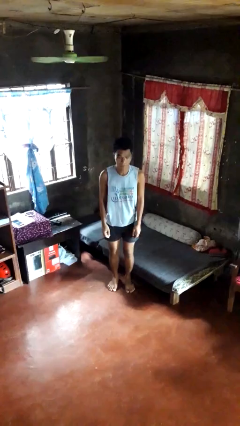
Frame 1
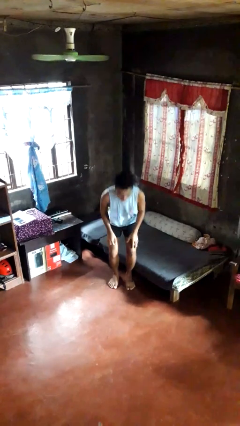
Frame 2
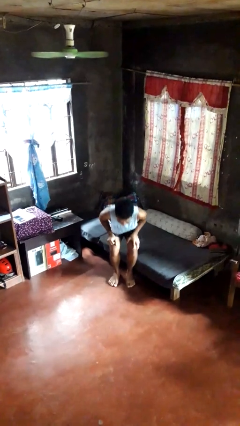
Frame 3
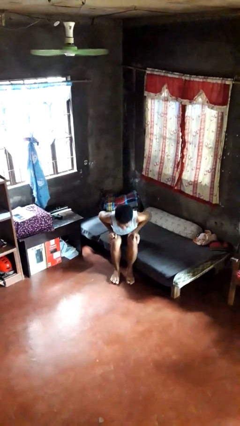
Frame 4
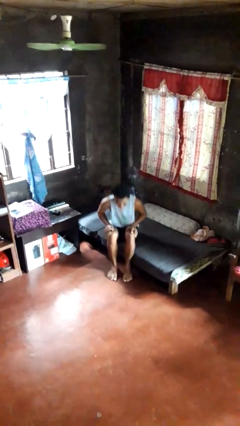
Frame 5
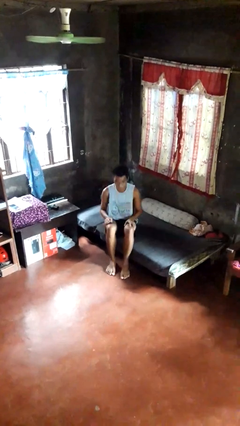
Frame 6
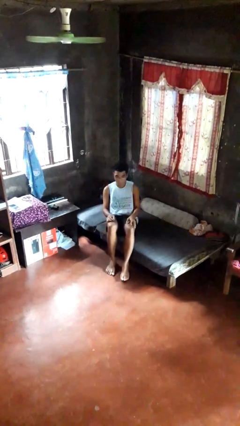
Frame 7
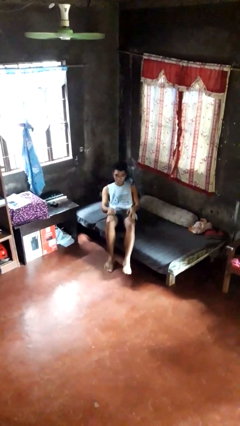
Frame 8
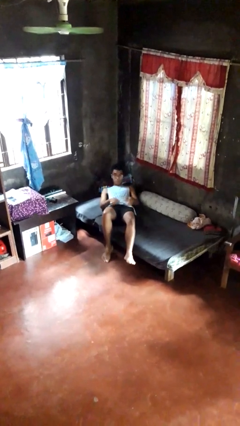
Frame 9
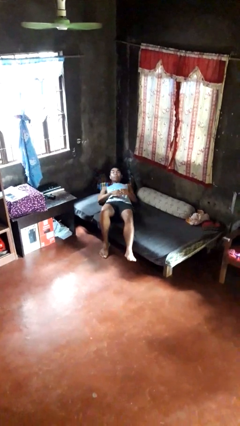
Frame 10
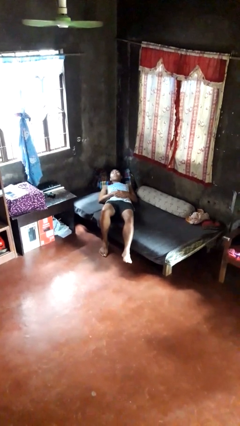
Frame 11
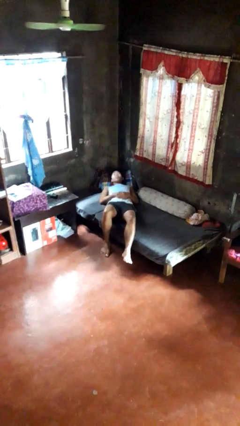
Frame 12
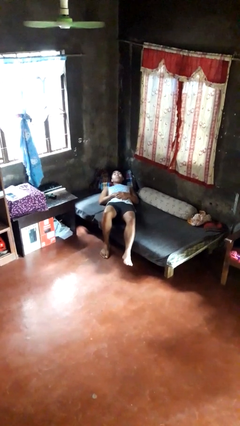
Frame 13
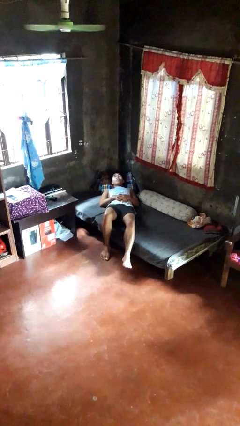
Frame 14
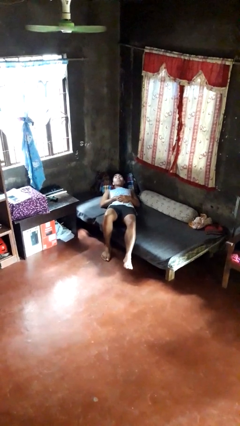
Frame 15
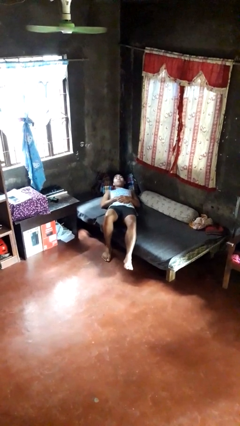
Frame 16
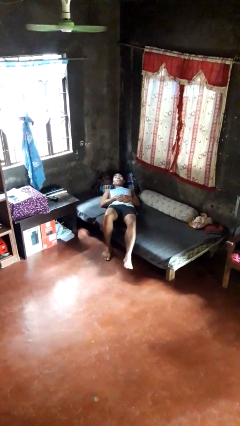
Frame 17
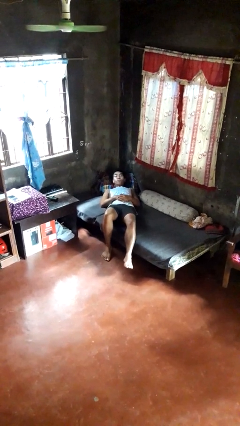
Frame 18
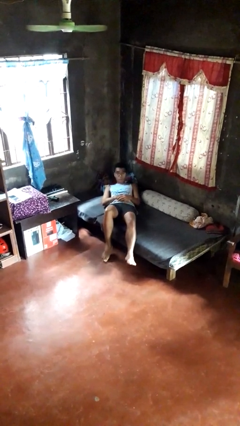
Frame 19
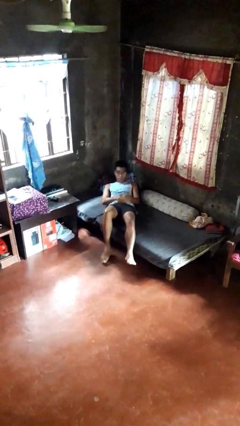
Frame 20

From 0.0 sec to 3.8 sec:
person lies down on bed

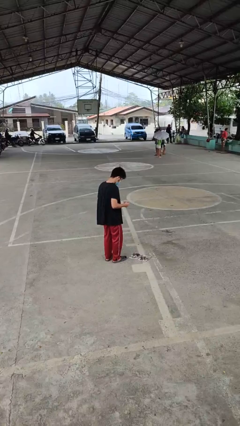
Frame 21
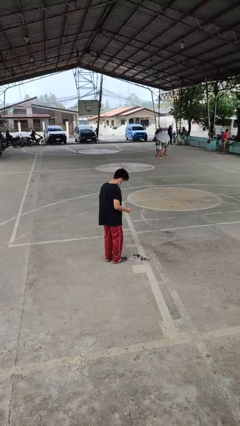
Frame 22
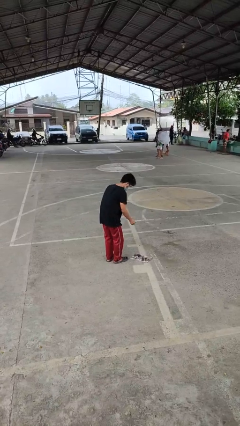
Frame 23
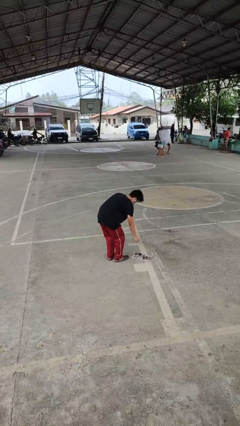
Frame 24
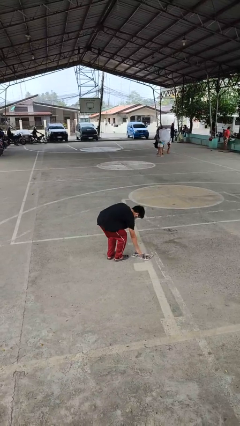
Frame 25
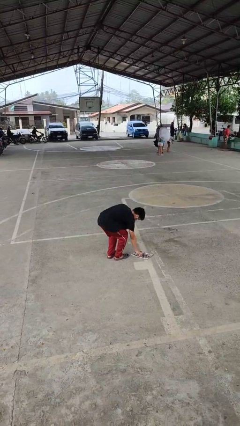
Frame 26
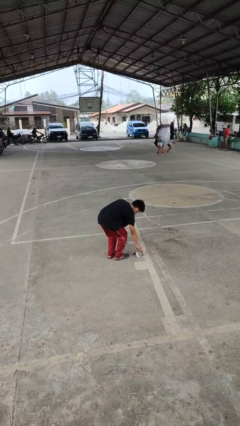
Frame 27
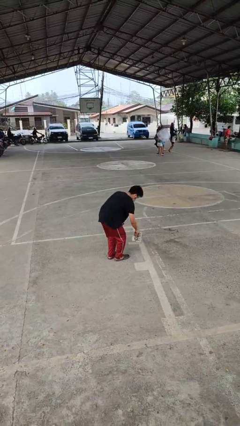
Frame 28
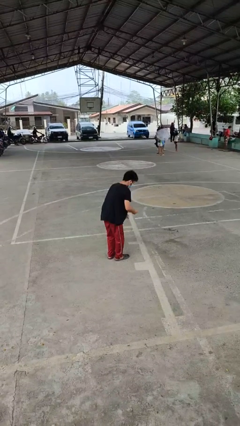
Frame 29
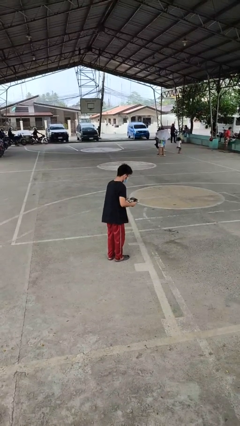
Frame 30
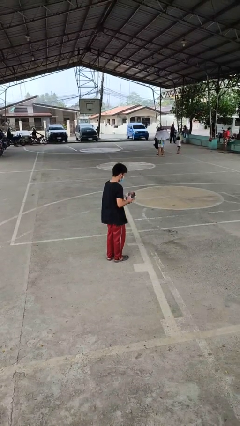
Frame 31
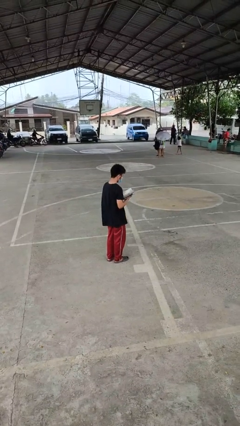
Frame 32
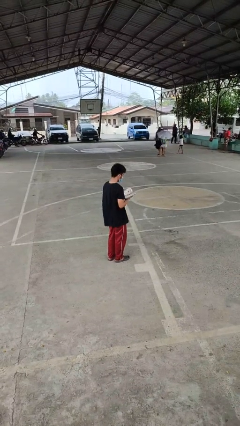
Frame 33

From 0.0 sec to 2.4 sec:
person picks up object from floor

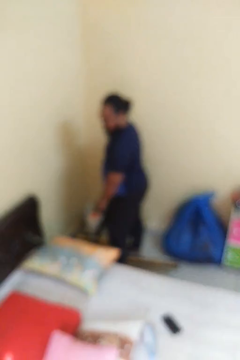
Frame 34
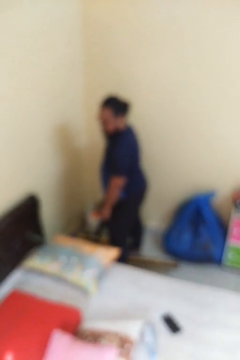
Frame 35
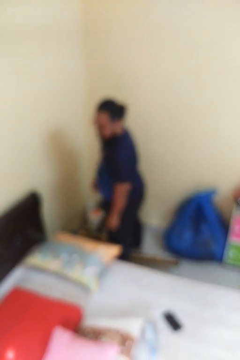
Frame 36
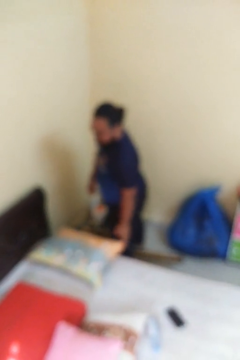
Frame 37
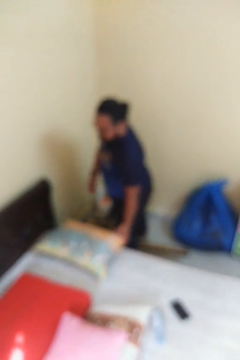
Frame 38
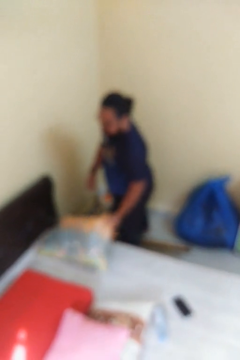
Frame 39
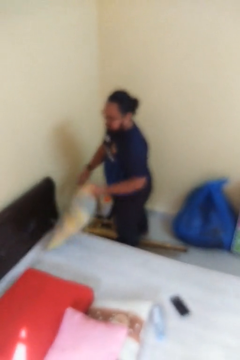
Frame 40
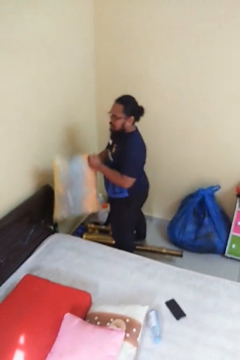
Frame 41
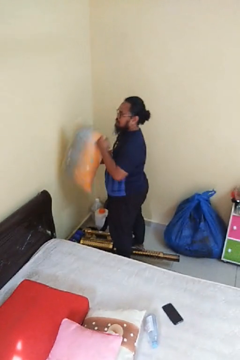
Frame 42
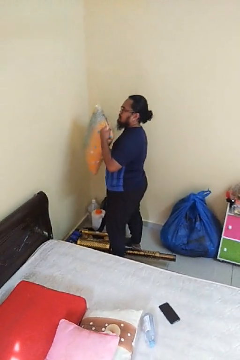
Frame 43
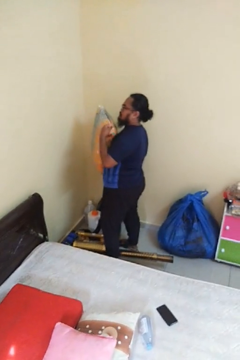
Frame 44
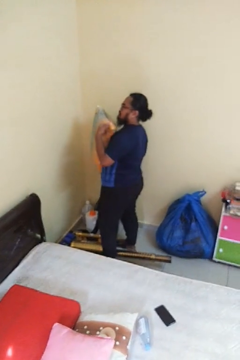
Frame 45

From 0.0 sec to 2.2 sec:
person picks up object from bed

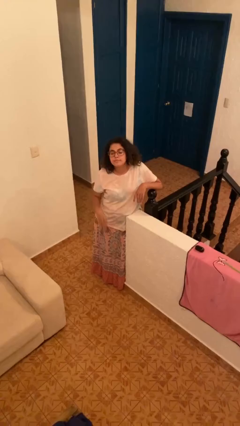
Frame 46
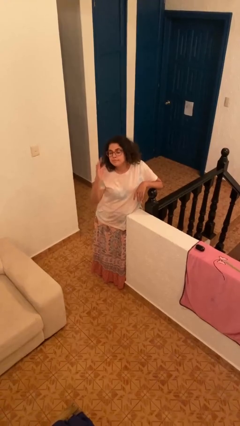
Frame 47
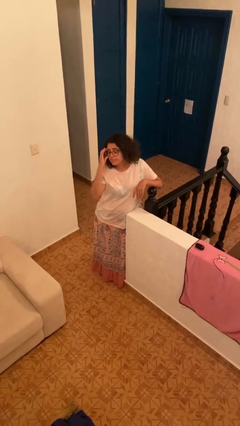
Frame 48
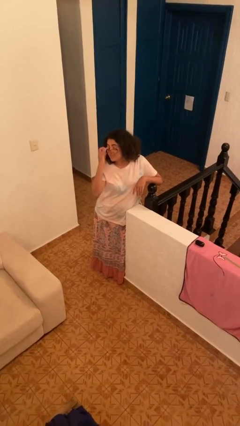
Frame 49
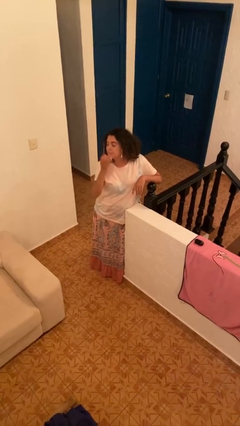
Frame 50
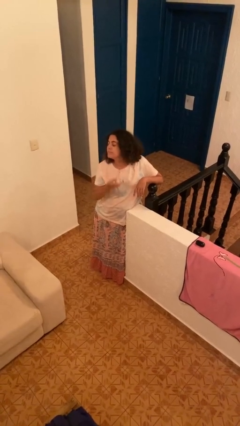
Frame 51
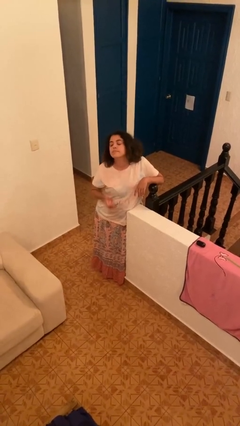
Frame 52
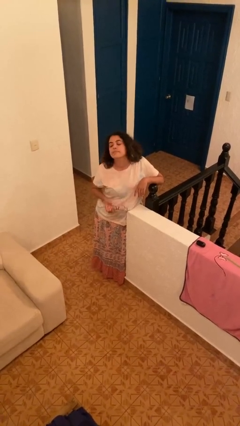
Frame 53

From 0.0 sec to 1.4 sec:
person takes off glasses

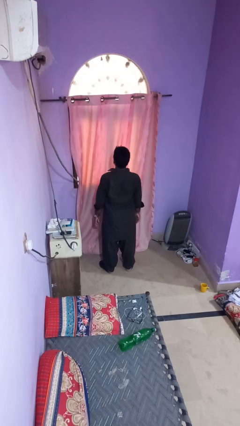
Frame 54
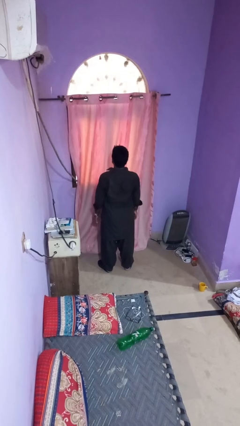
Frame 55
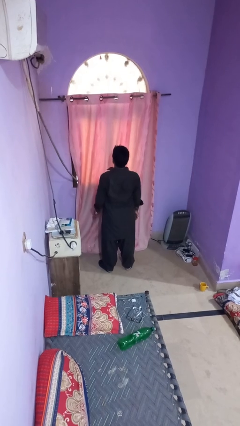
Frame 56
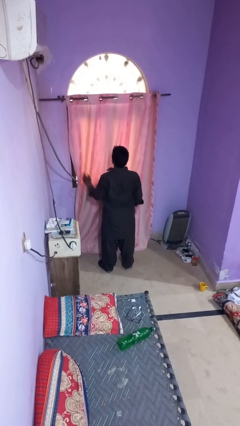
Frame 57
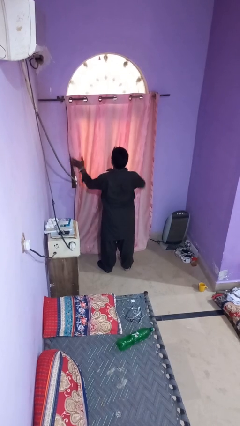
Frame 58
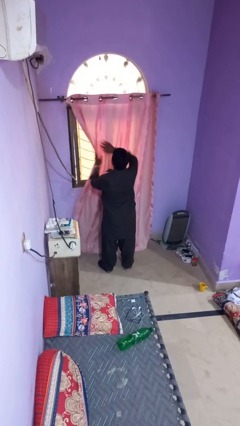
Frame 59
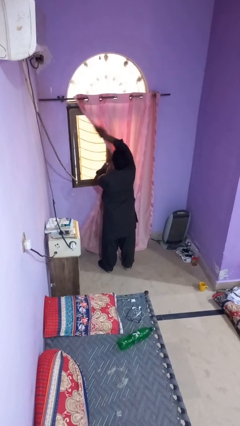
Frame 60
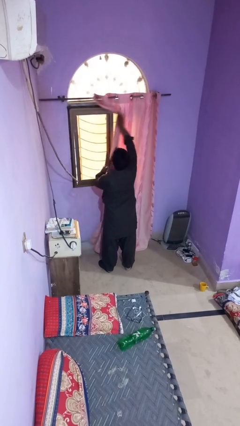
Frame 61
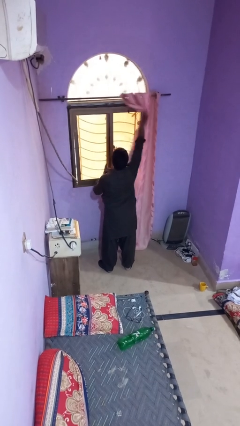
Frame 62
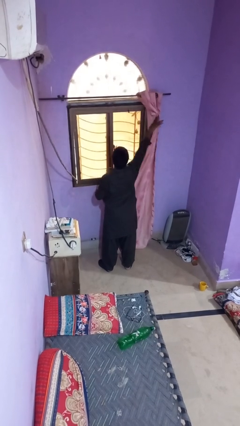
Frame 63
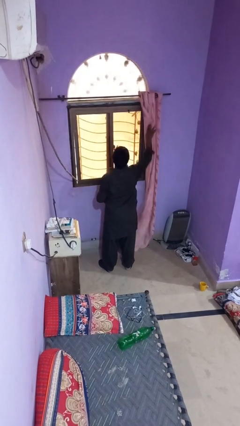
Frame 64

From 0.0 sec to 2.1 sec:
person opens curtains

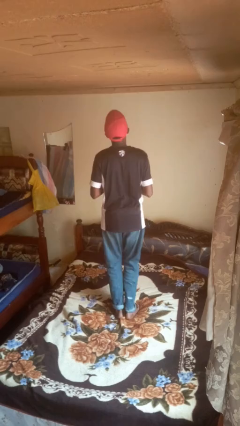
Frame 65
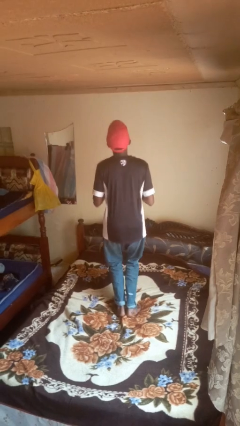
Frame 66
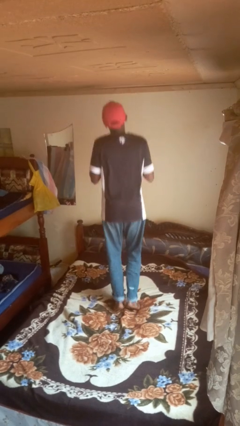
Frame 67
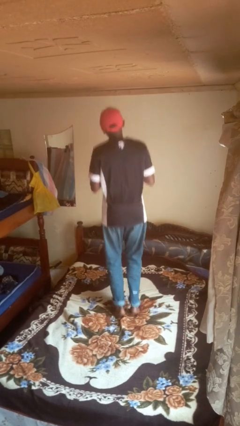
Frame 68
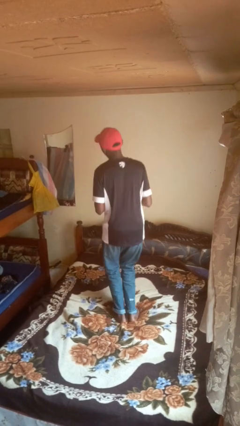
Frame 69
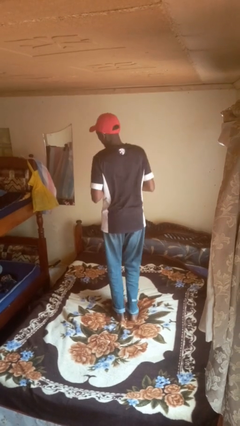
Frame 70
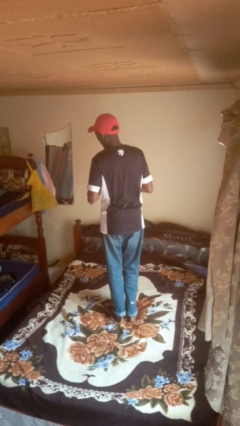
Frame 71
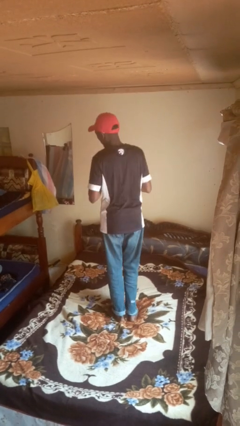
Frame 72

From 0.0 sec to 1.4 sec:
person jumps on bed

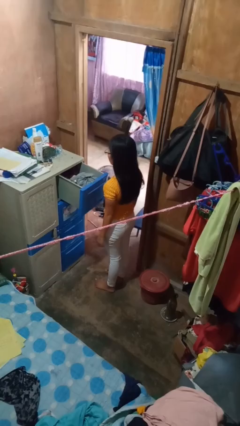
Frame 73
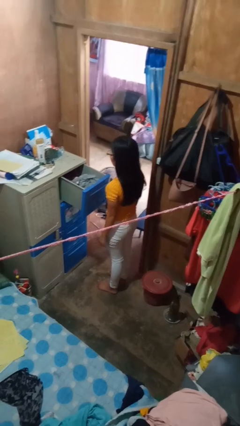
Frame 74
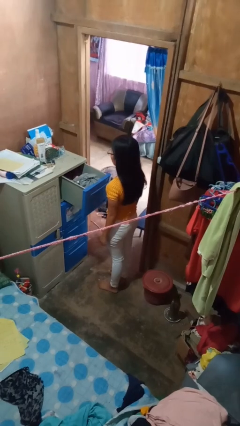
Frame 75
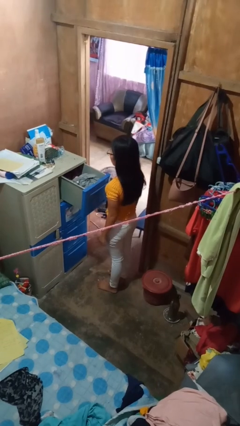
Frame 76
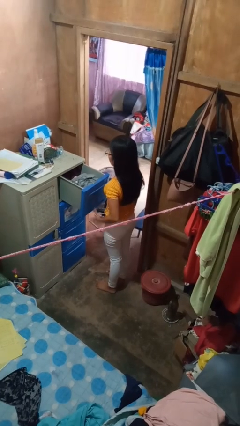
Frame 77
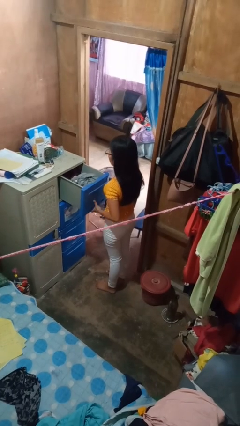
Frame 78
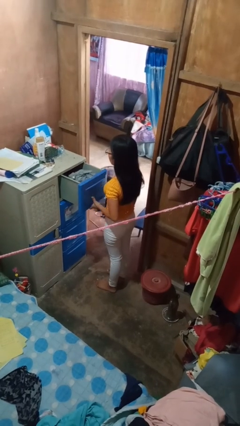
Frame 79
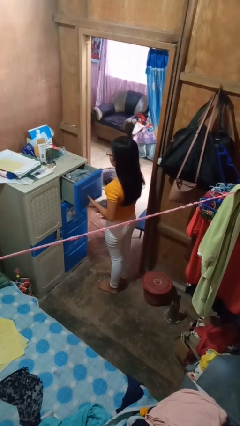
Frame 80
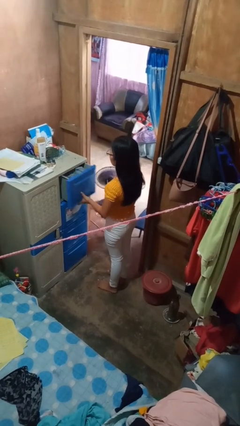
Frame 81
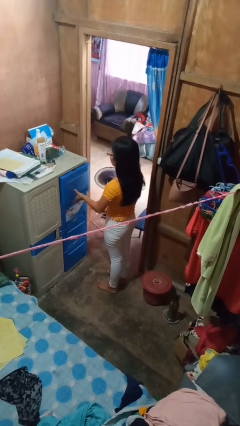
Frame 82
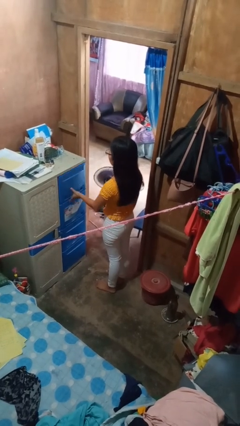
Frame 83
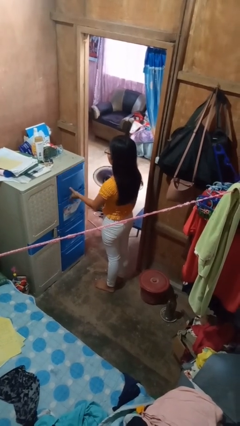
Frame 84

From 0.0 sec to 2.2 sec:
person closes dresser drawer

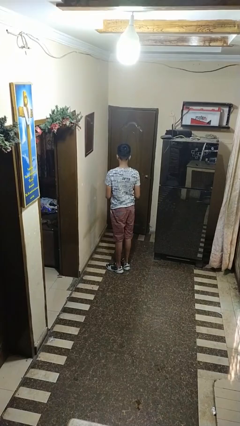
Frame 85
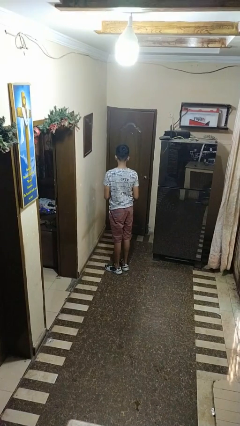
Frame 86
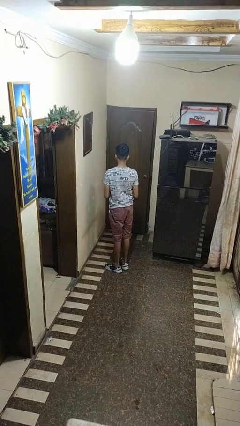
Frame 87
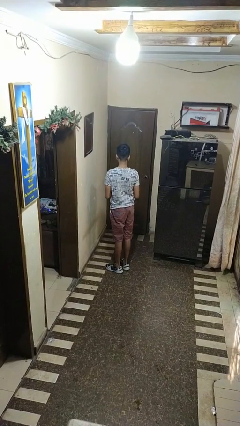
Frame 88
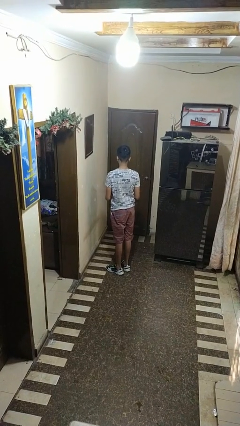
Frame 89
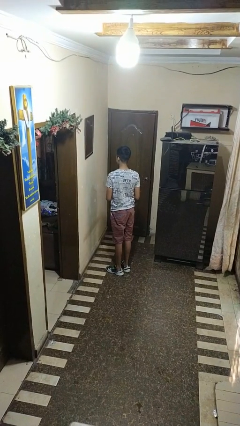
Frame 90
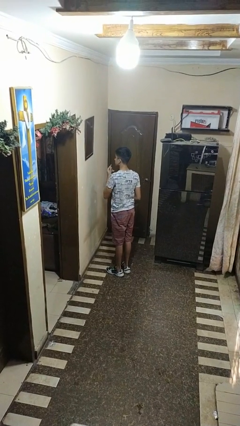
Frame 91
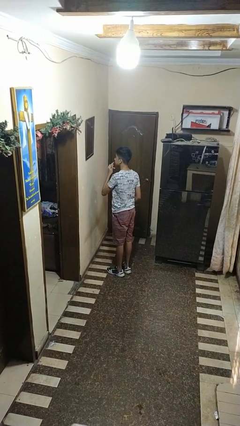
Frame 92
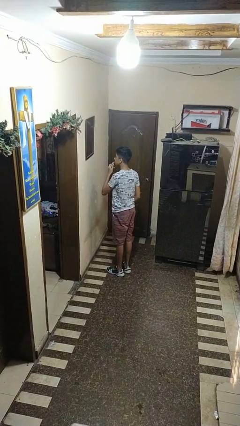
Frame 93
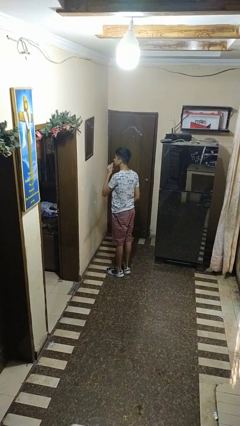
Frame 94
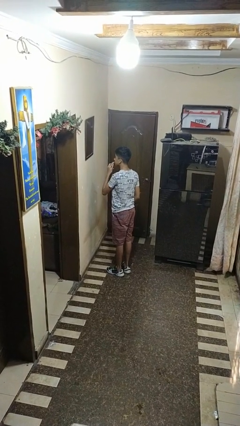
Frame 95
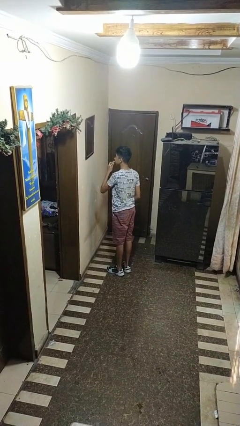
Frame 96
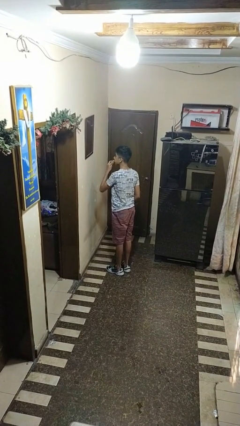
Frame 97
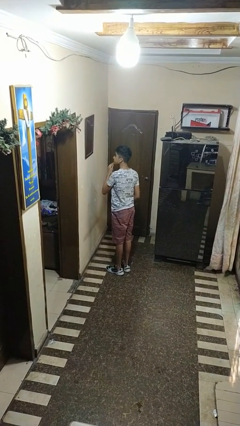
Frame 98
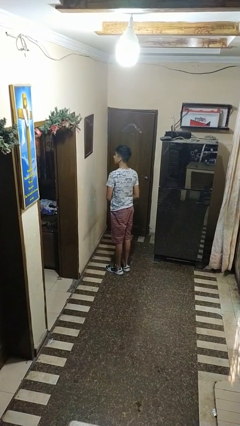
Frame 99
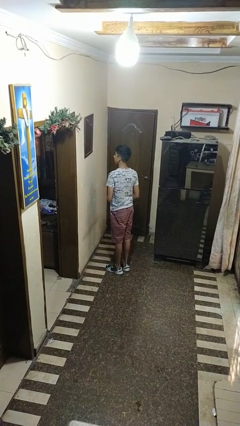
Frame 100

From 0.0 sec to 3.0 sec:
person applies lip makeup
